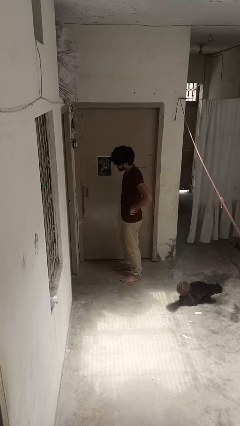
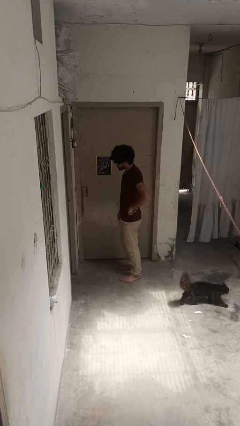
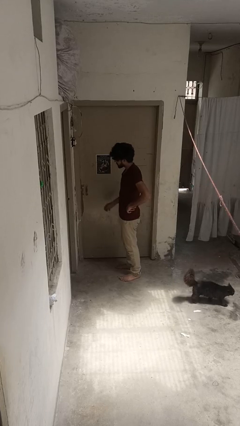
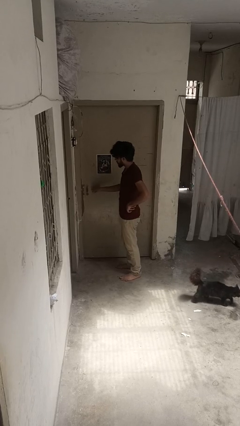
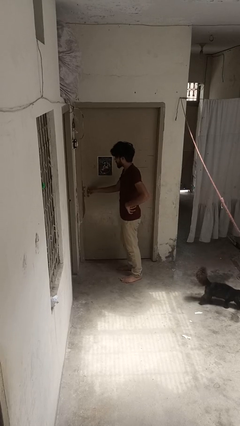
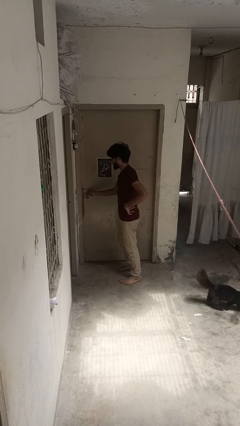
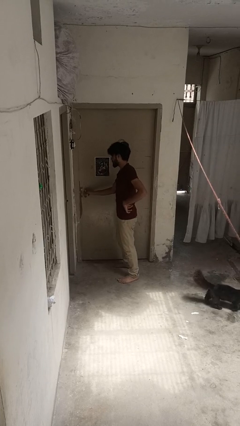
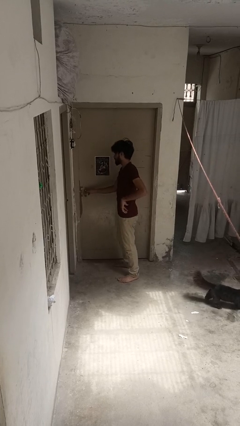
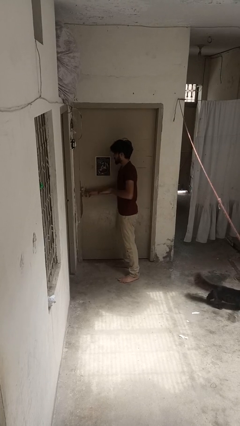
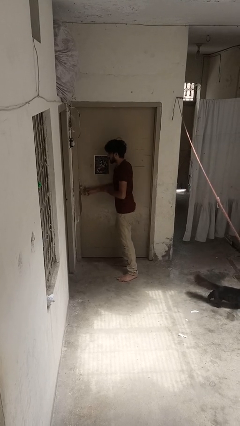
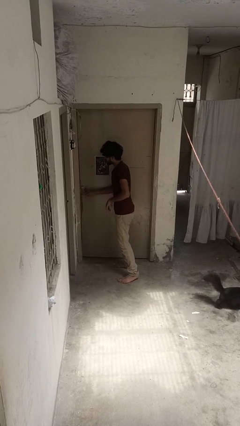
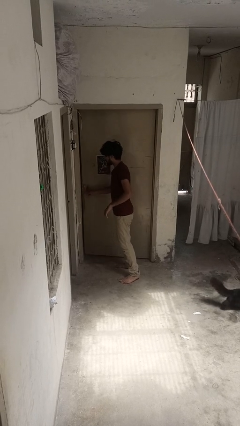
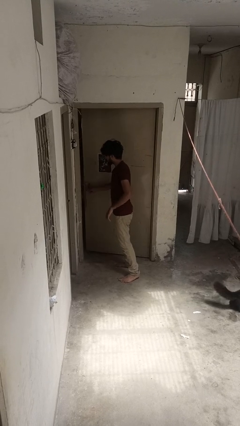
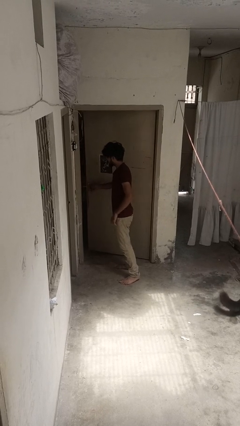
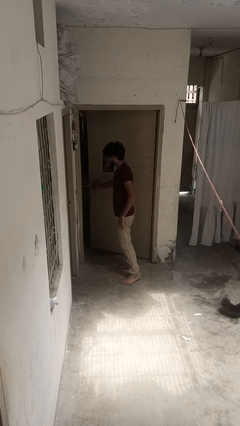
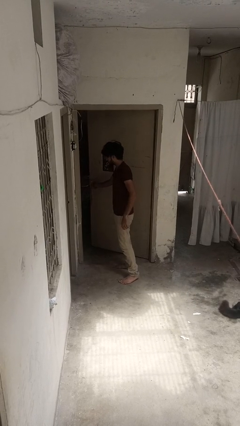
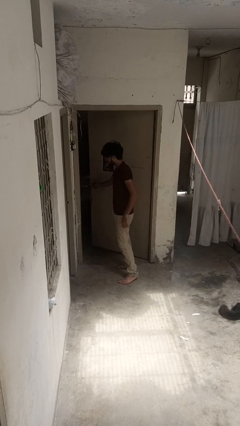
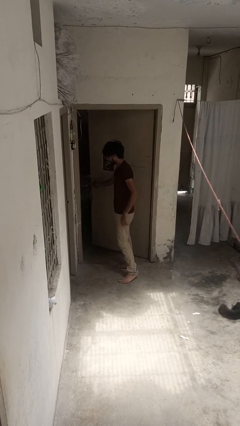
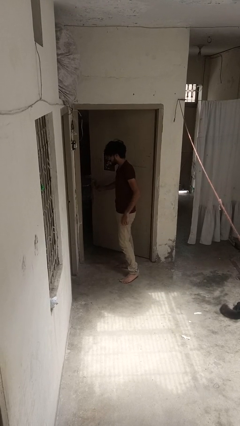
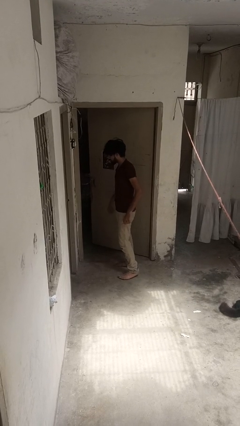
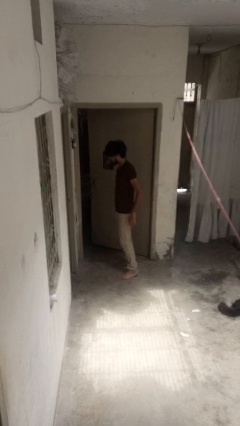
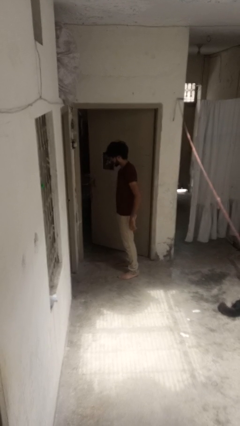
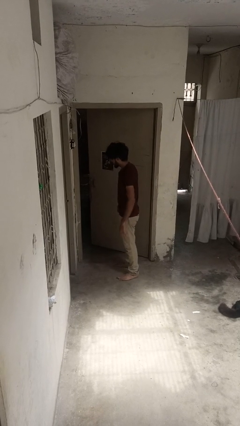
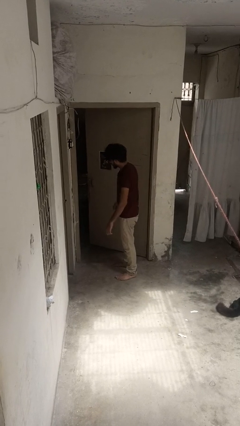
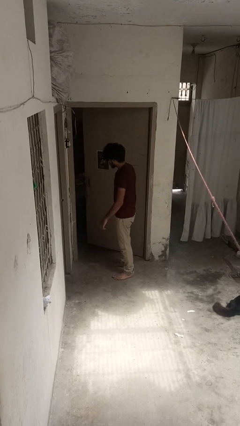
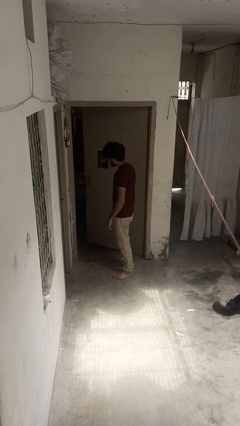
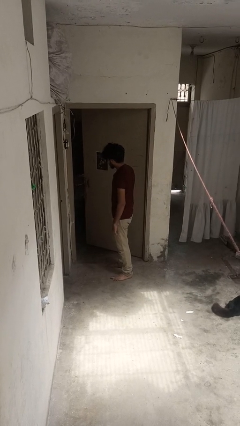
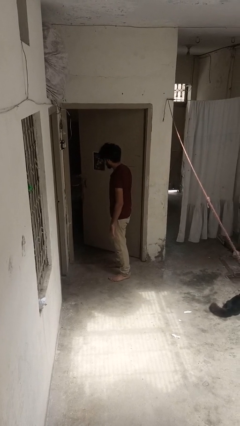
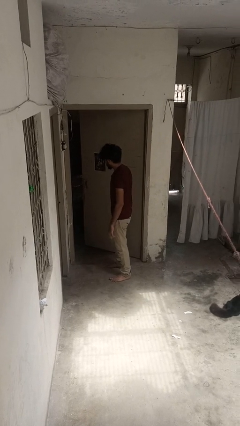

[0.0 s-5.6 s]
person opens gate

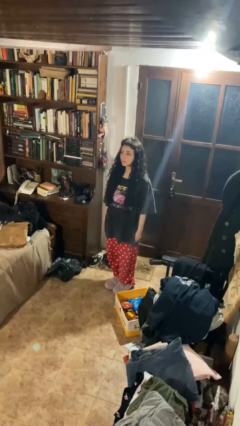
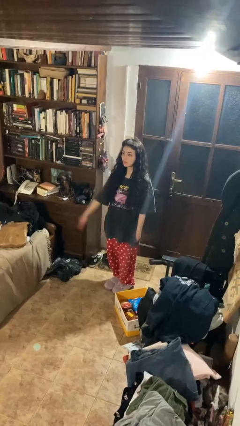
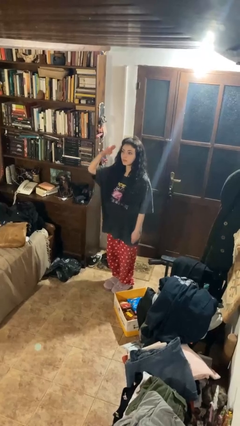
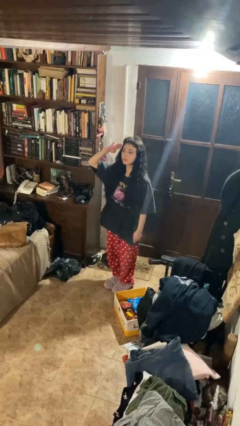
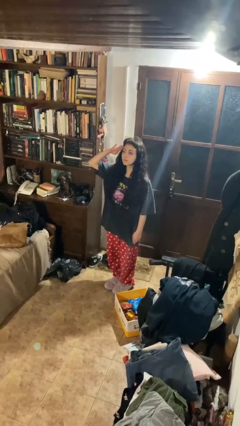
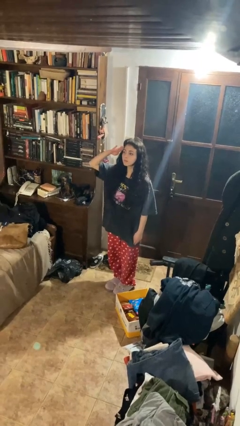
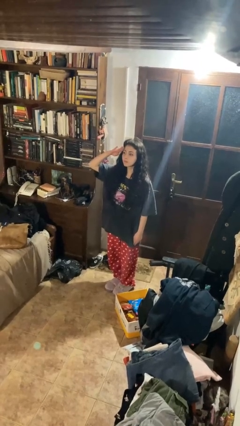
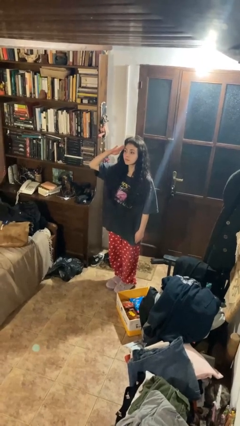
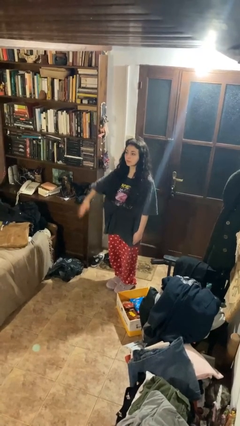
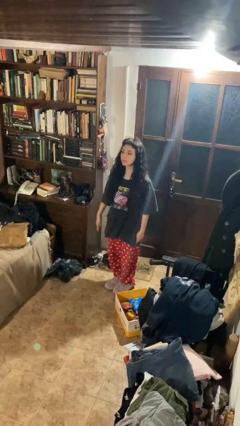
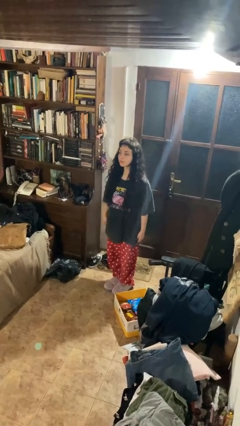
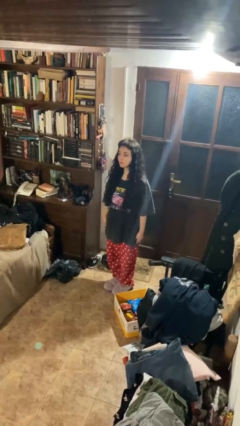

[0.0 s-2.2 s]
person salutes

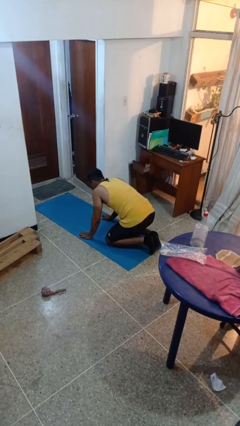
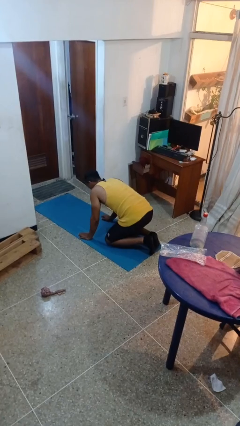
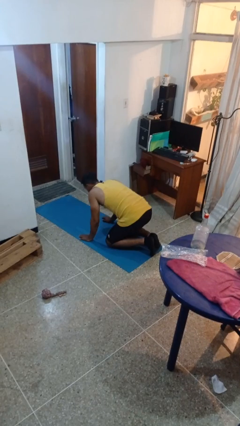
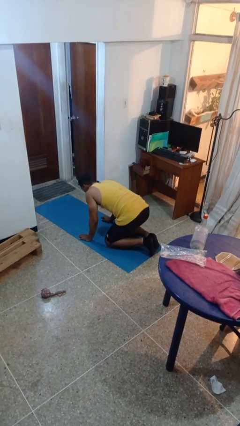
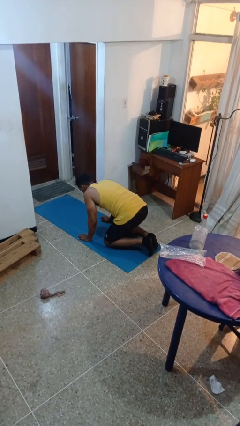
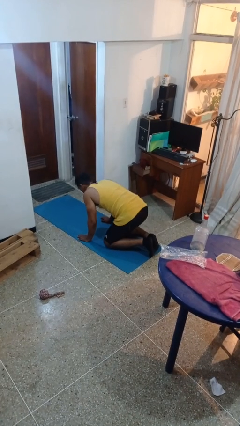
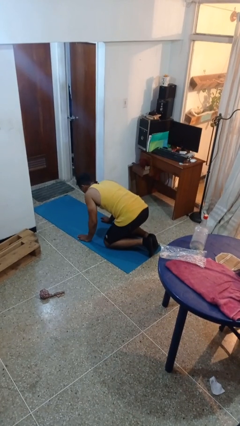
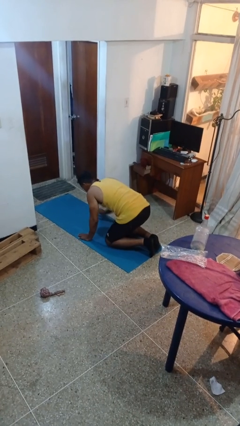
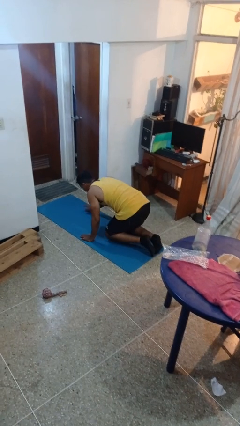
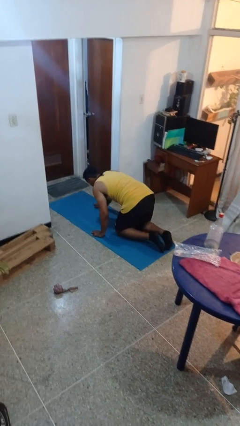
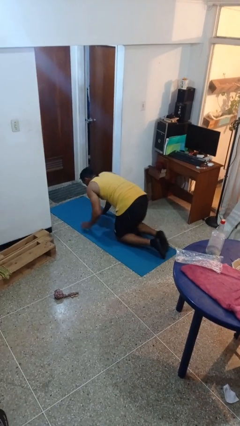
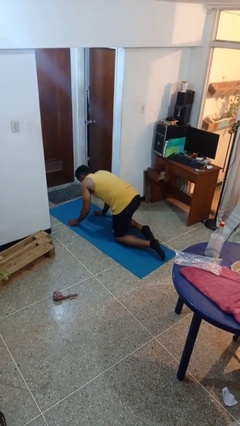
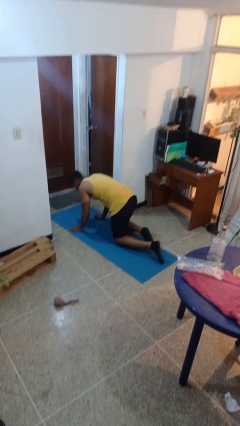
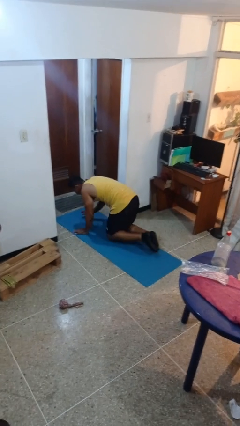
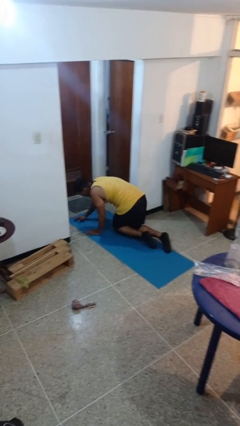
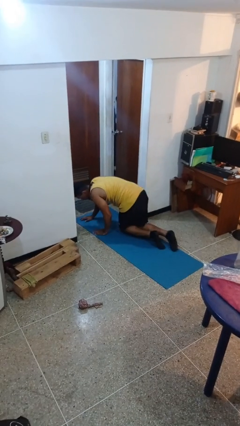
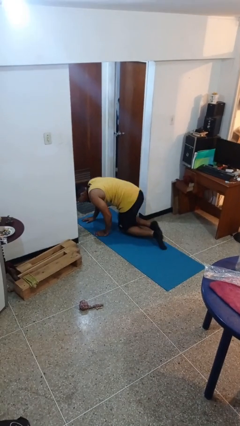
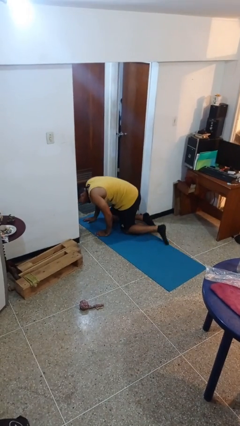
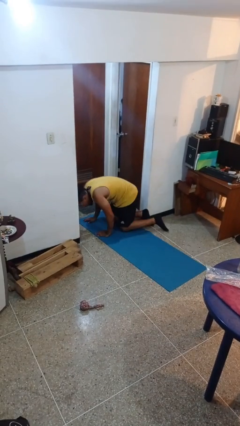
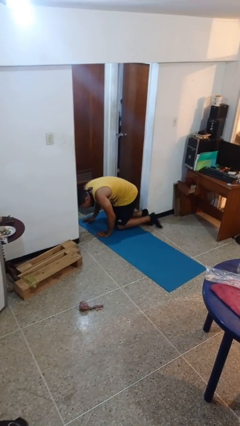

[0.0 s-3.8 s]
person crawls

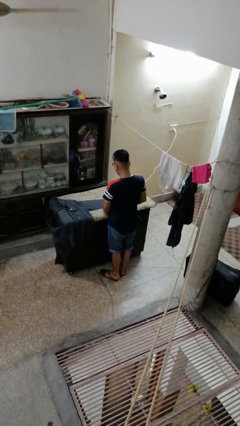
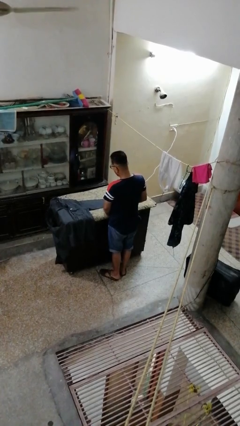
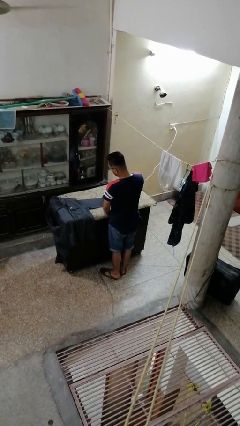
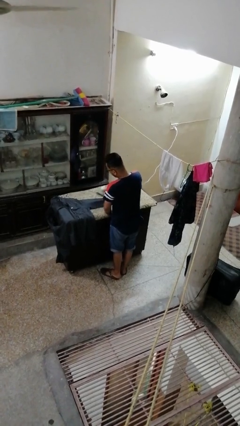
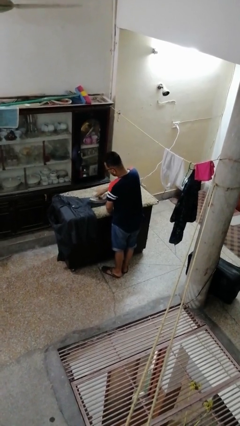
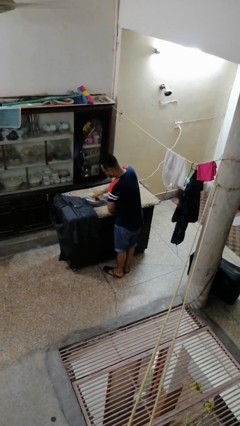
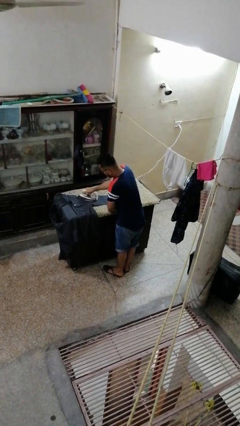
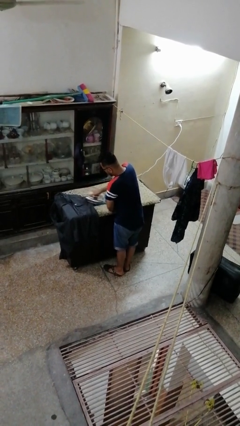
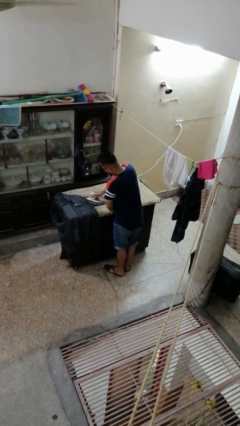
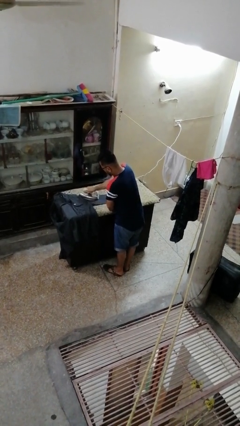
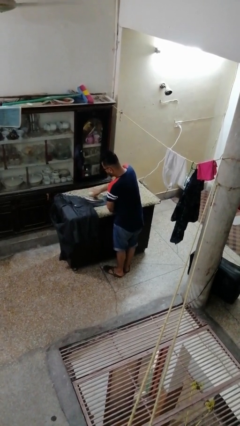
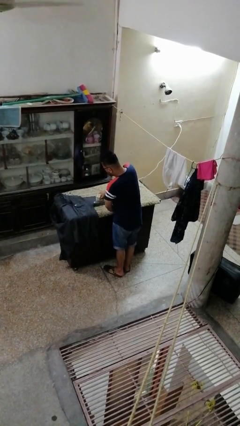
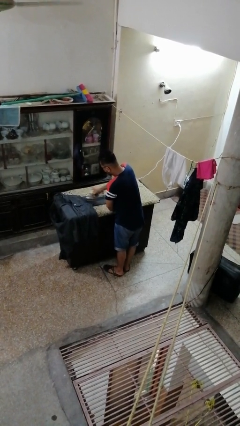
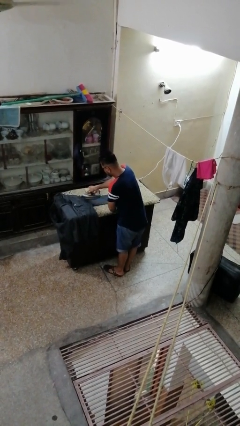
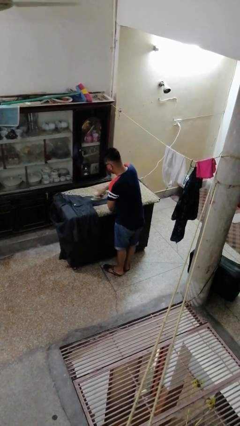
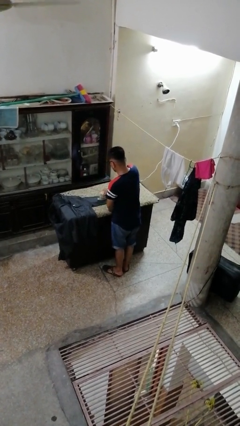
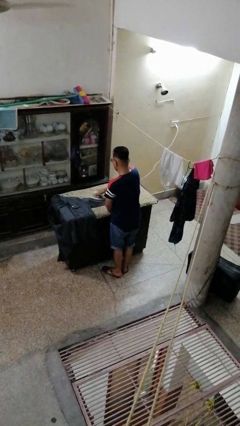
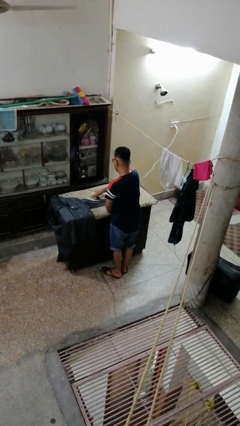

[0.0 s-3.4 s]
person irons clothes

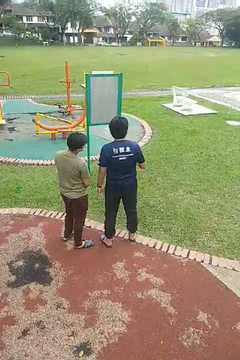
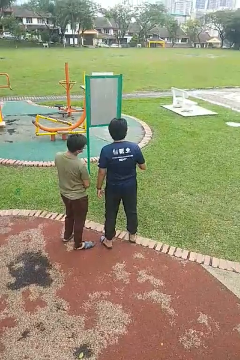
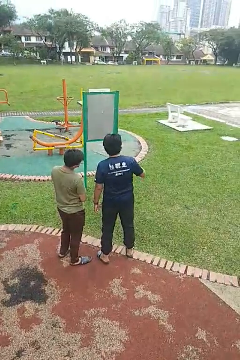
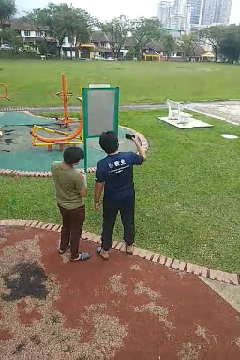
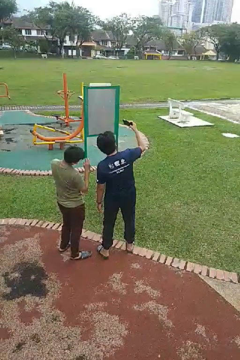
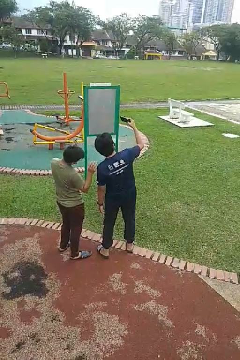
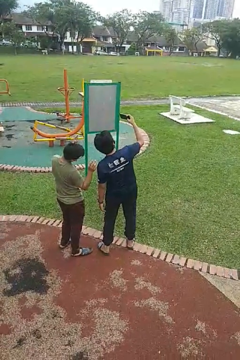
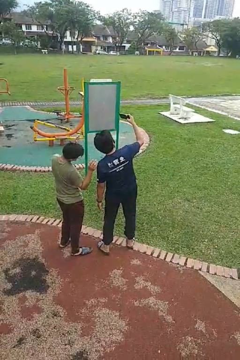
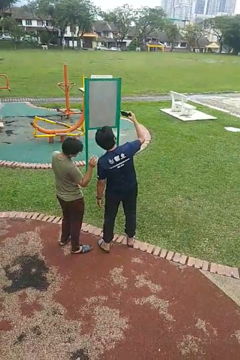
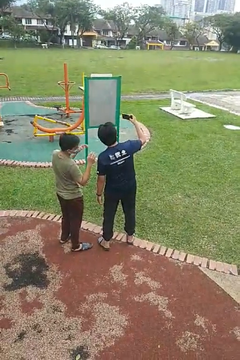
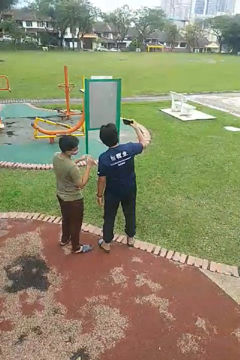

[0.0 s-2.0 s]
person takes selfie with person

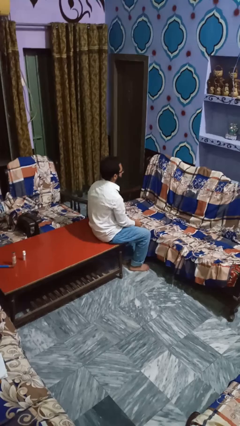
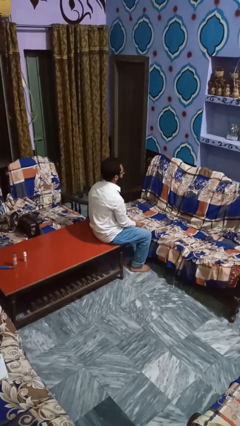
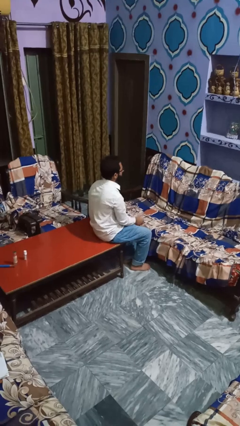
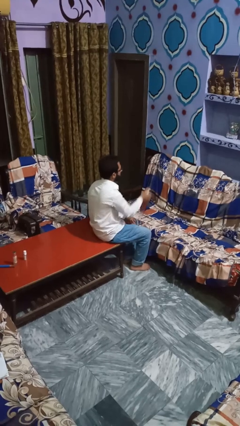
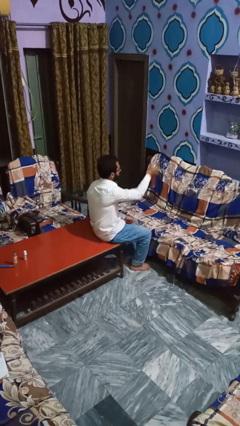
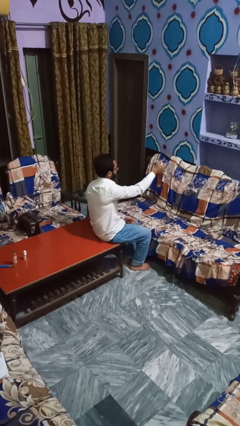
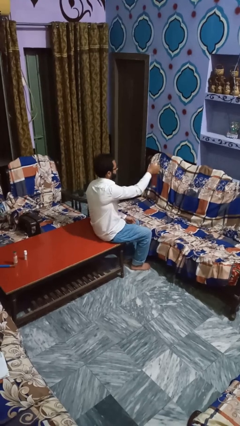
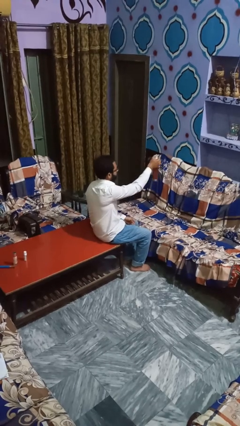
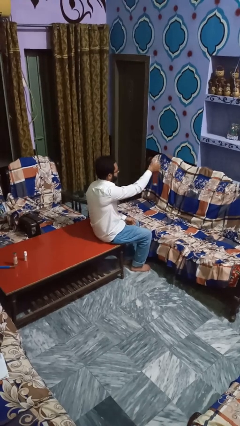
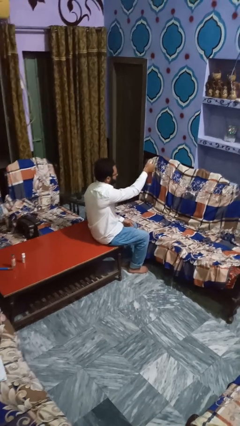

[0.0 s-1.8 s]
person sprays from bottle
